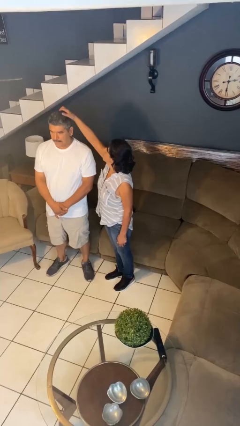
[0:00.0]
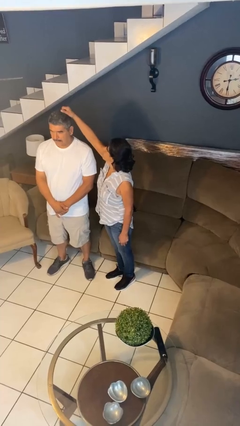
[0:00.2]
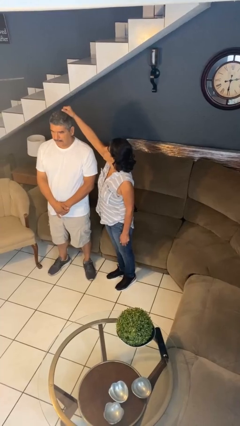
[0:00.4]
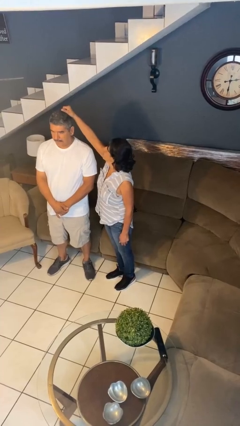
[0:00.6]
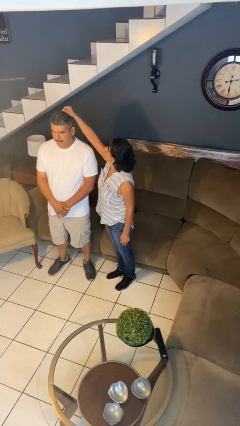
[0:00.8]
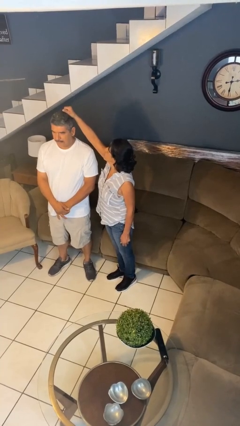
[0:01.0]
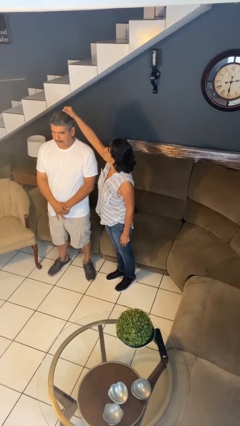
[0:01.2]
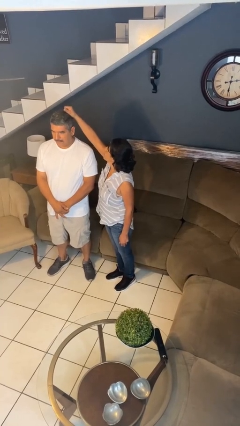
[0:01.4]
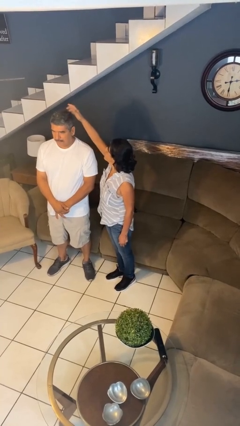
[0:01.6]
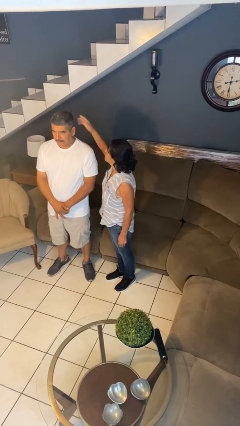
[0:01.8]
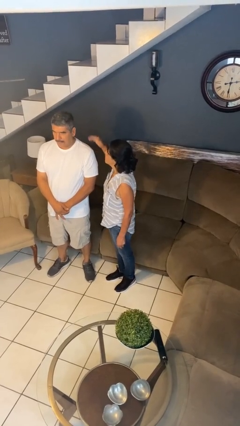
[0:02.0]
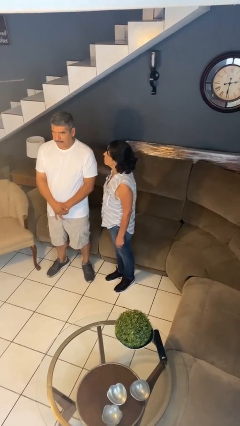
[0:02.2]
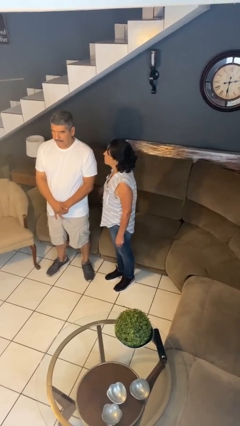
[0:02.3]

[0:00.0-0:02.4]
person grabs person by hair

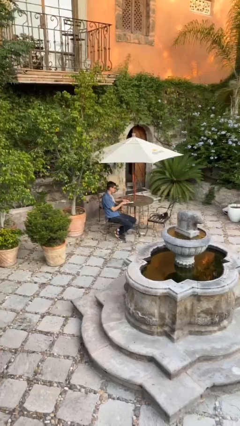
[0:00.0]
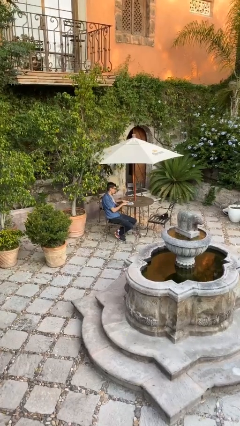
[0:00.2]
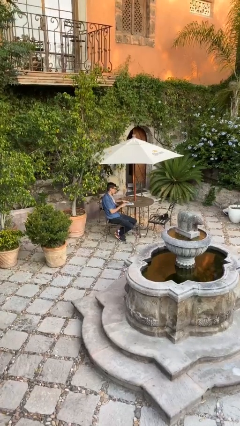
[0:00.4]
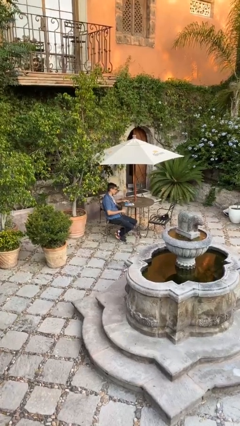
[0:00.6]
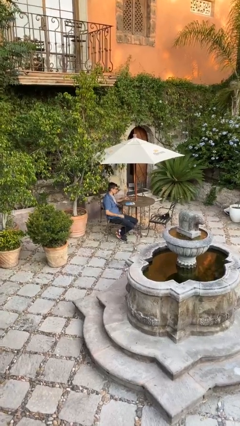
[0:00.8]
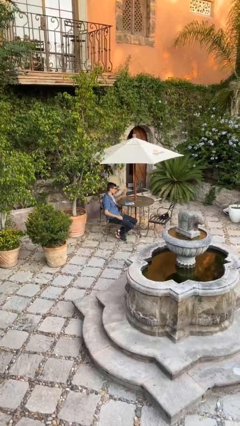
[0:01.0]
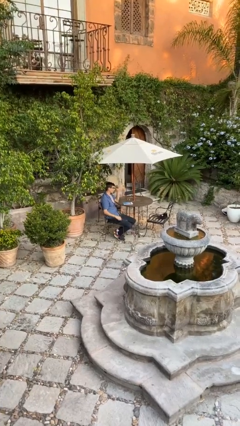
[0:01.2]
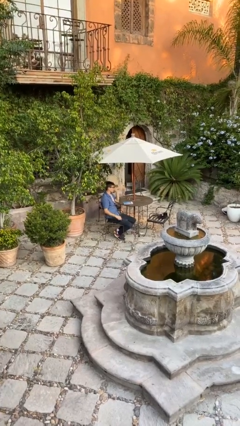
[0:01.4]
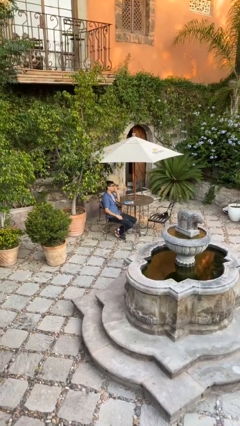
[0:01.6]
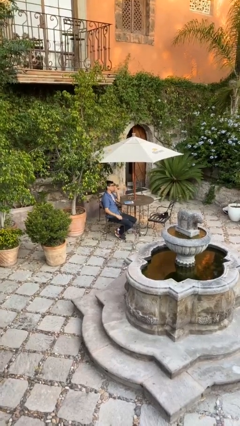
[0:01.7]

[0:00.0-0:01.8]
person puts down object on table

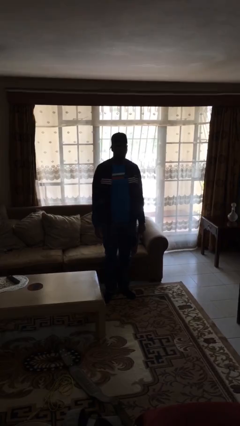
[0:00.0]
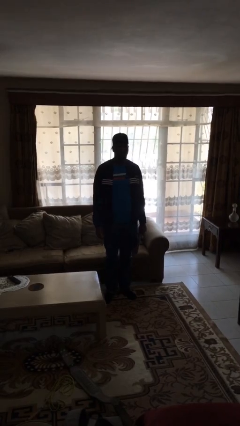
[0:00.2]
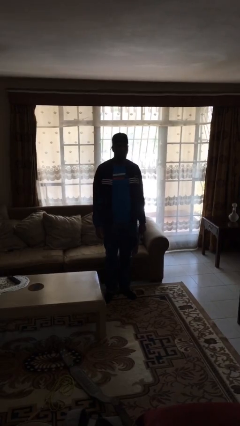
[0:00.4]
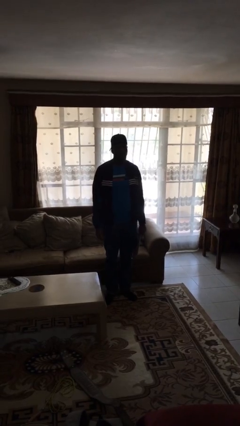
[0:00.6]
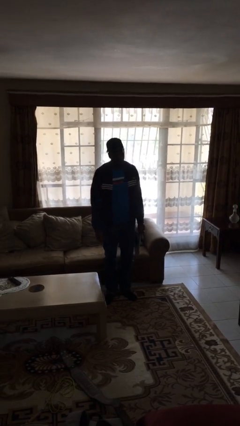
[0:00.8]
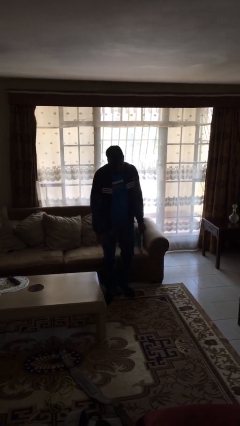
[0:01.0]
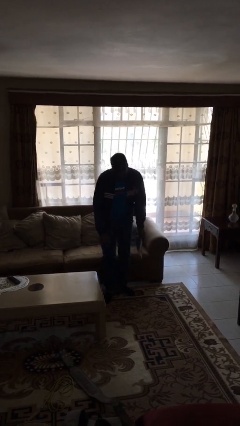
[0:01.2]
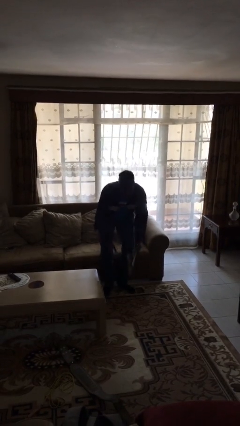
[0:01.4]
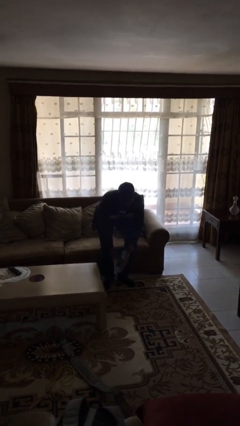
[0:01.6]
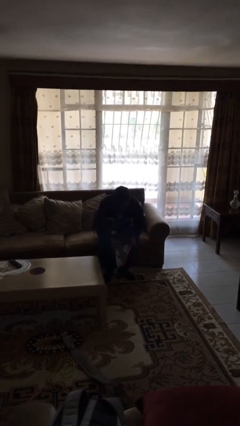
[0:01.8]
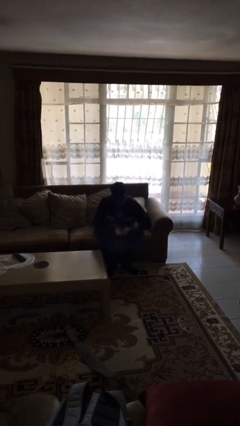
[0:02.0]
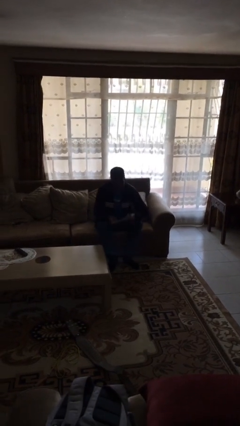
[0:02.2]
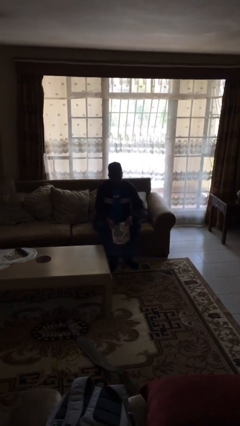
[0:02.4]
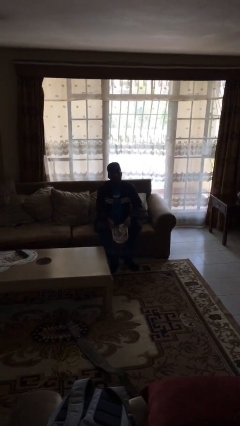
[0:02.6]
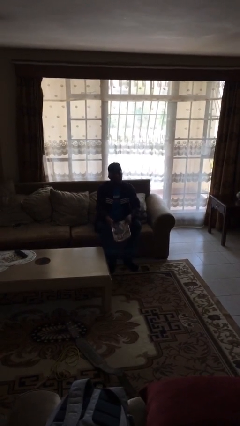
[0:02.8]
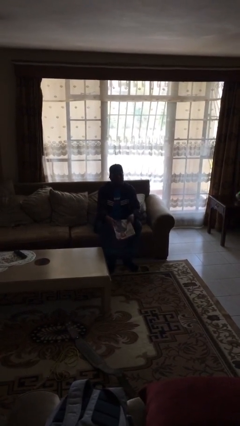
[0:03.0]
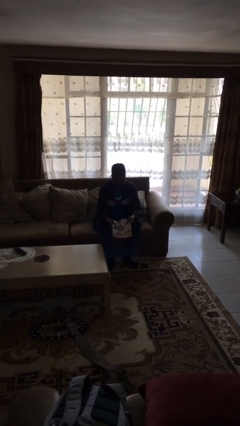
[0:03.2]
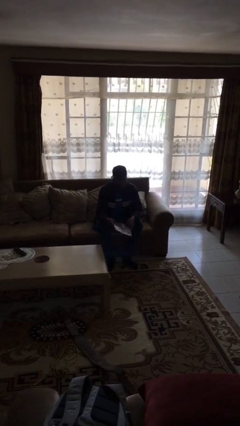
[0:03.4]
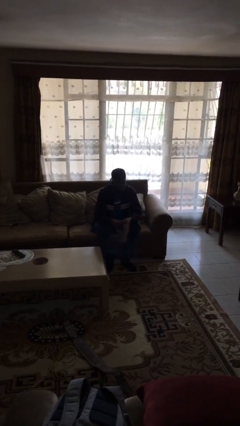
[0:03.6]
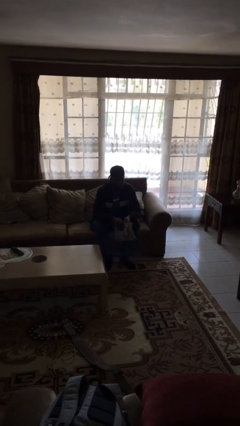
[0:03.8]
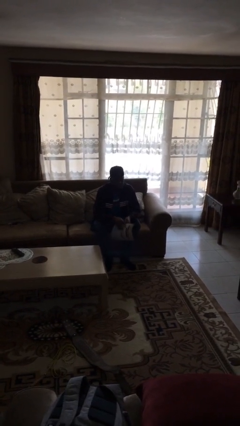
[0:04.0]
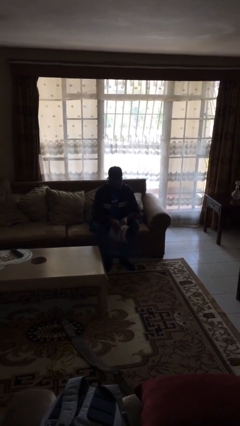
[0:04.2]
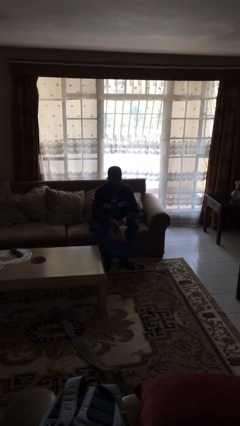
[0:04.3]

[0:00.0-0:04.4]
person sits down

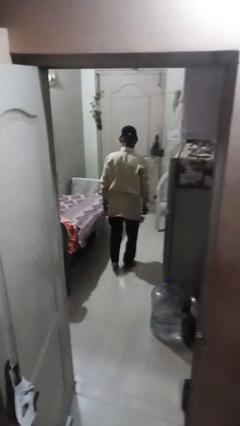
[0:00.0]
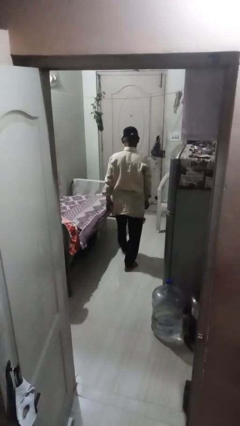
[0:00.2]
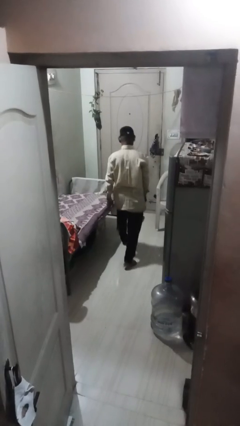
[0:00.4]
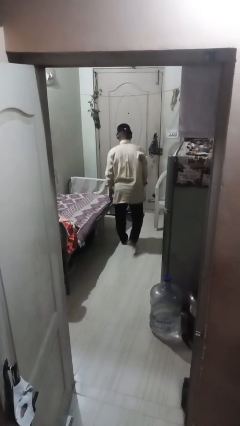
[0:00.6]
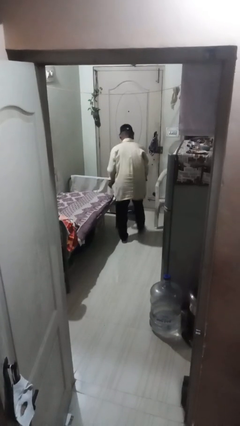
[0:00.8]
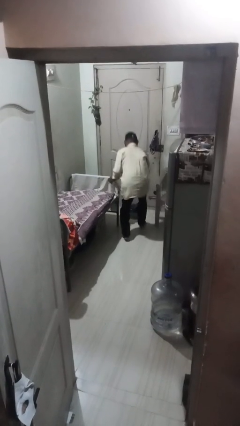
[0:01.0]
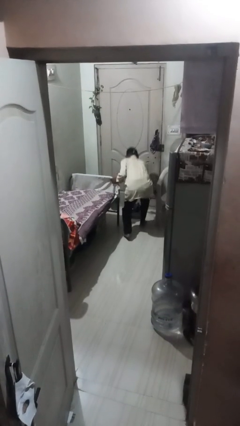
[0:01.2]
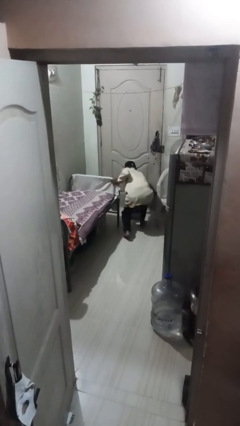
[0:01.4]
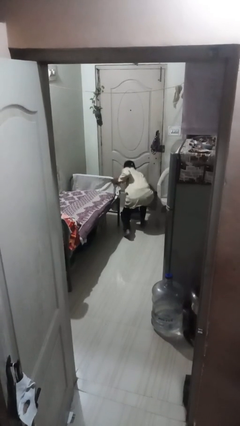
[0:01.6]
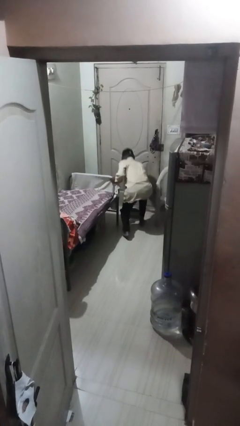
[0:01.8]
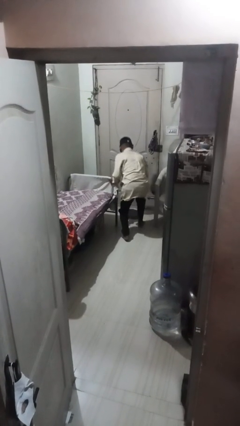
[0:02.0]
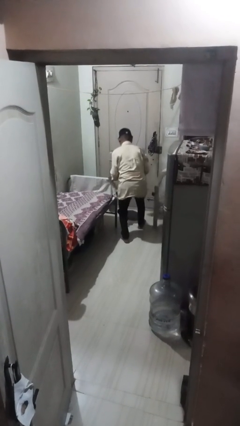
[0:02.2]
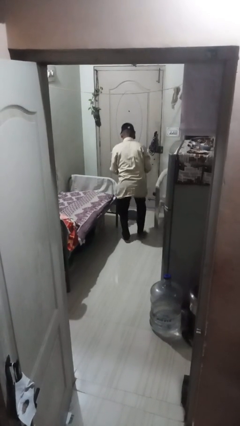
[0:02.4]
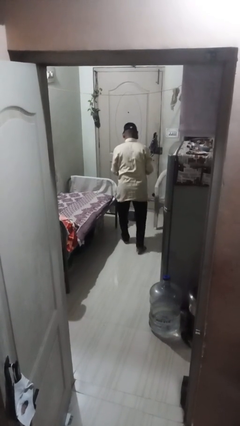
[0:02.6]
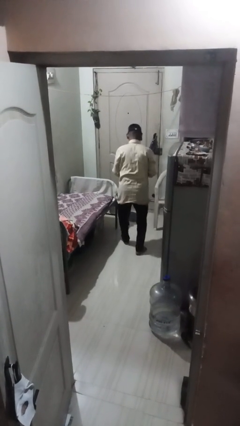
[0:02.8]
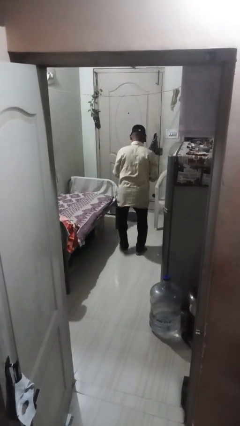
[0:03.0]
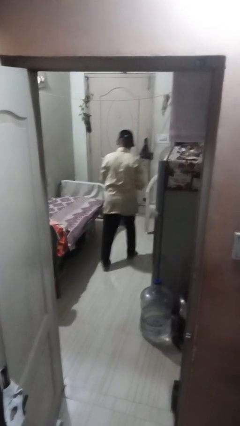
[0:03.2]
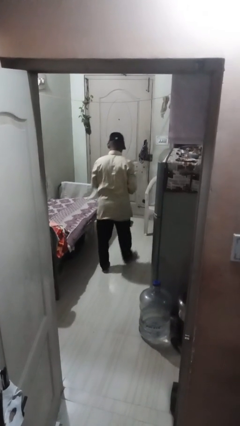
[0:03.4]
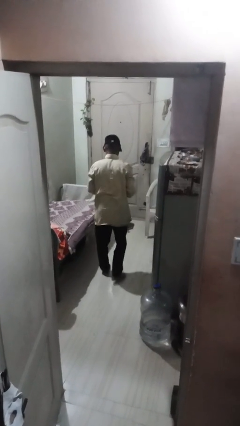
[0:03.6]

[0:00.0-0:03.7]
person picks up object from floor

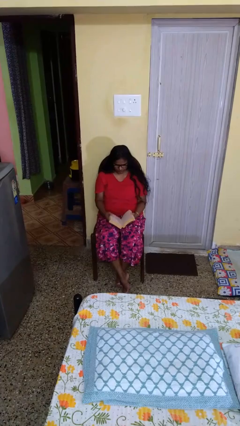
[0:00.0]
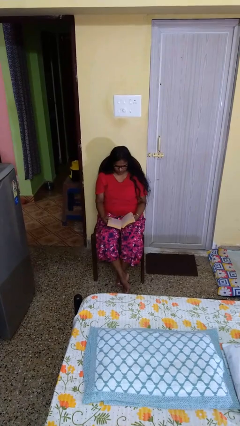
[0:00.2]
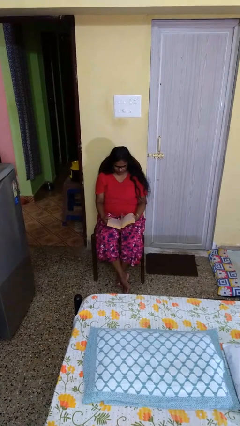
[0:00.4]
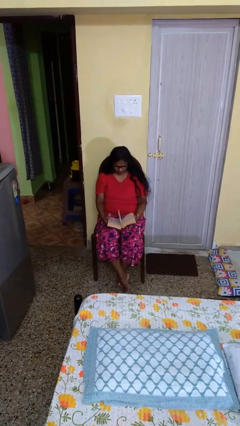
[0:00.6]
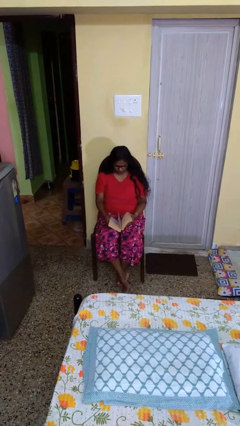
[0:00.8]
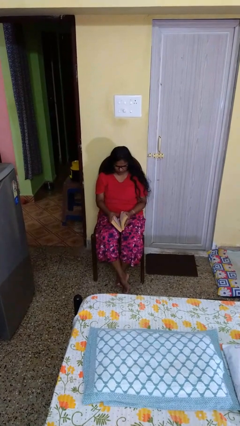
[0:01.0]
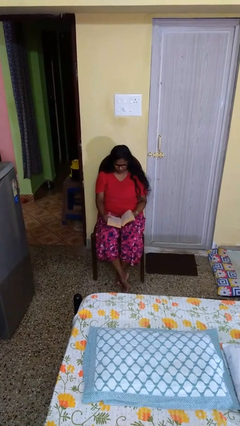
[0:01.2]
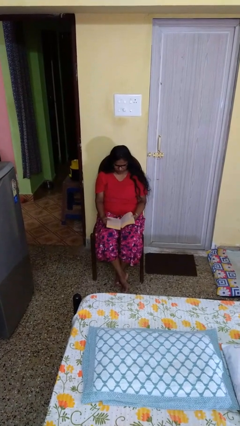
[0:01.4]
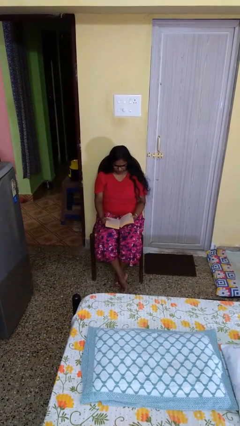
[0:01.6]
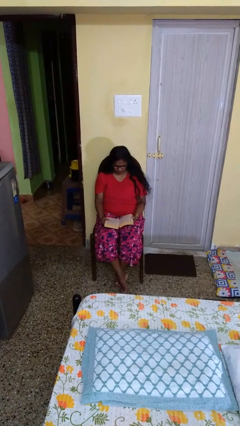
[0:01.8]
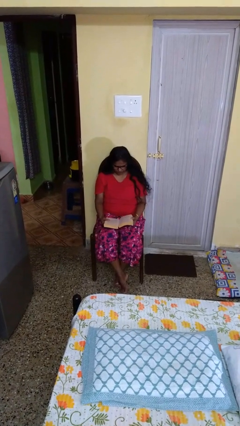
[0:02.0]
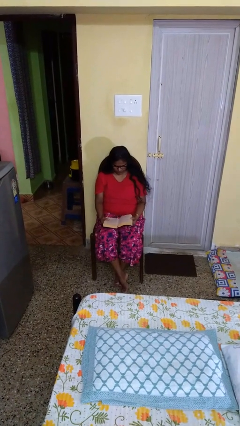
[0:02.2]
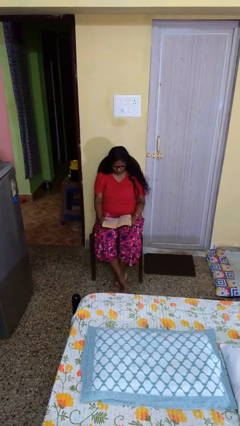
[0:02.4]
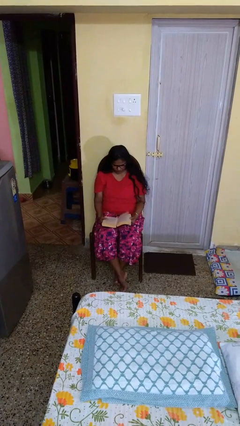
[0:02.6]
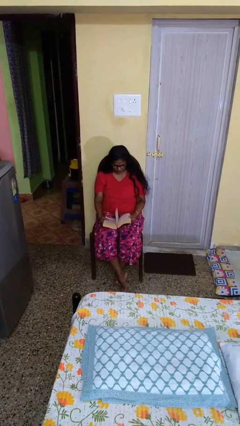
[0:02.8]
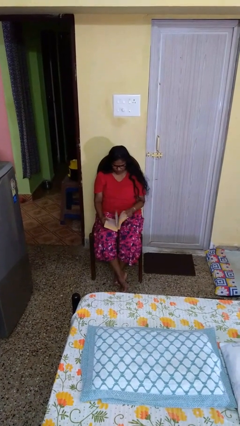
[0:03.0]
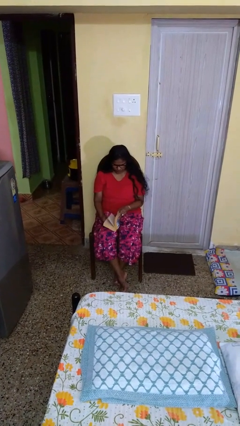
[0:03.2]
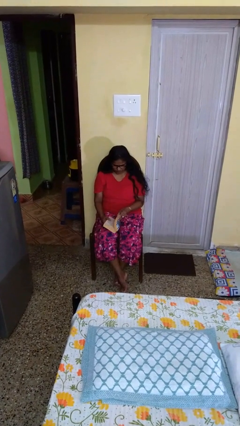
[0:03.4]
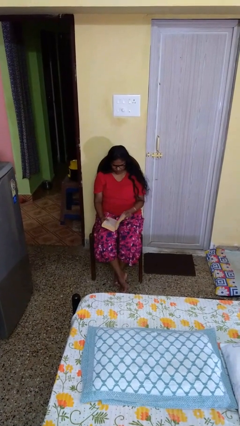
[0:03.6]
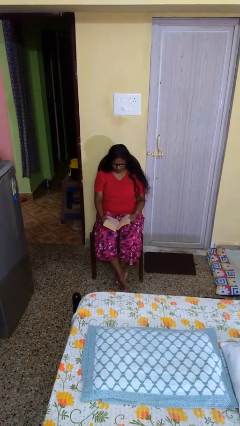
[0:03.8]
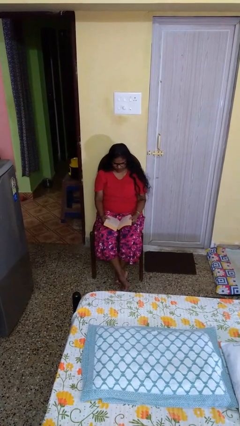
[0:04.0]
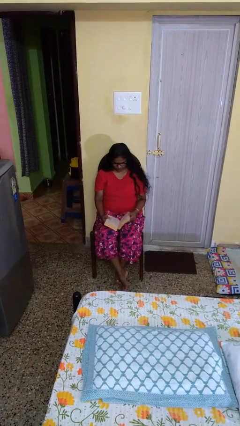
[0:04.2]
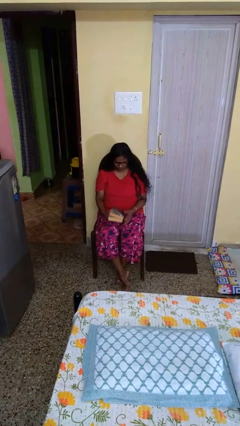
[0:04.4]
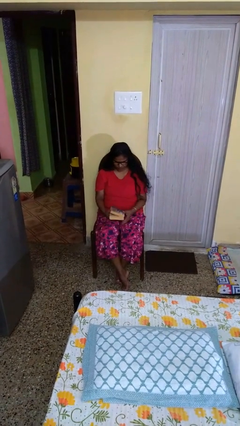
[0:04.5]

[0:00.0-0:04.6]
person reads book

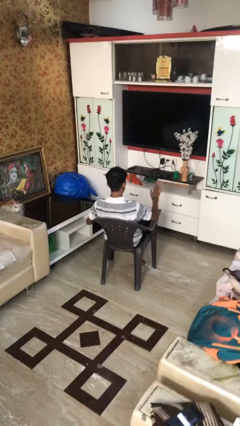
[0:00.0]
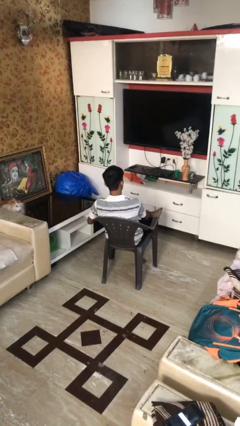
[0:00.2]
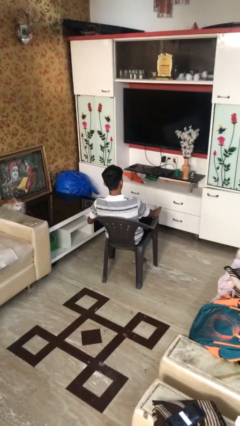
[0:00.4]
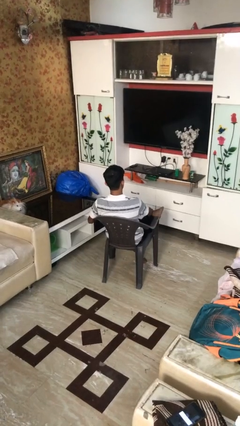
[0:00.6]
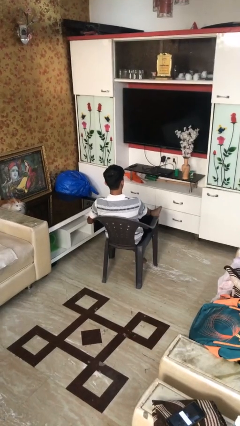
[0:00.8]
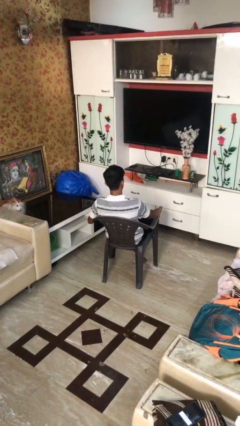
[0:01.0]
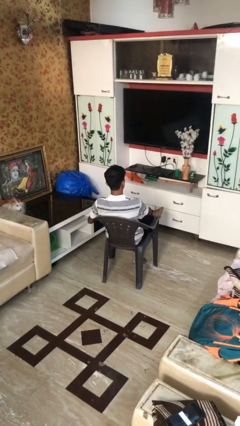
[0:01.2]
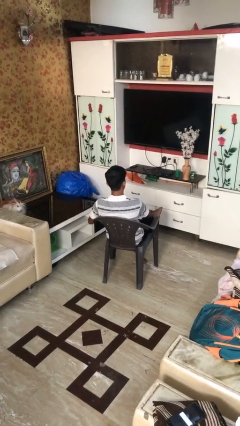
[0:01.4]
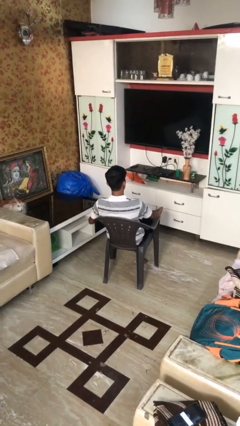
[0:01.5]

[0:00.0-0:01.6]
person swats bug
